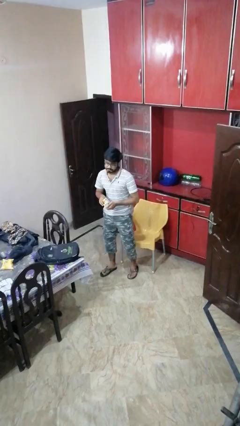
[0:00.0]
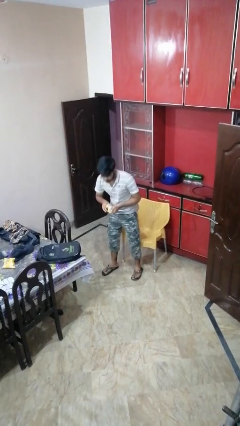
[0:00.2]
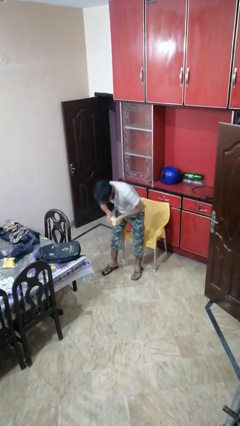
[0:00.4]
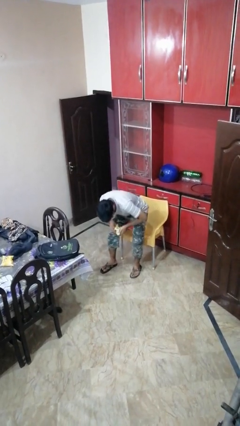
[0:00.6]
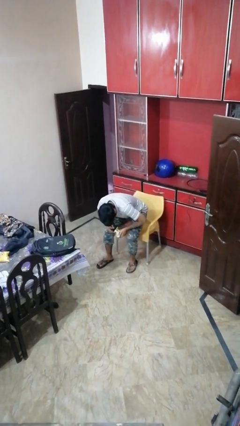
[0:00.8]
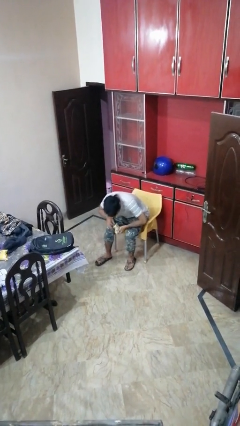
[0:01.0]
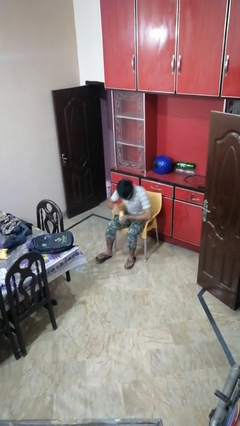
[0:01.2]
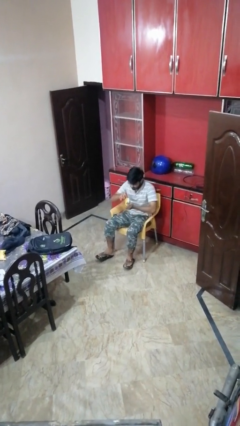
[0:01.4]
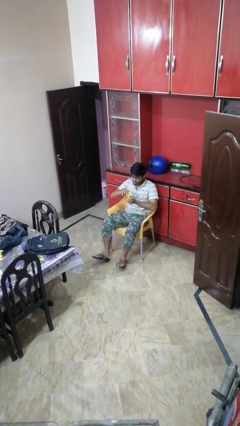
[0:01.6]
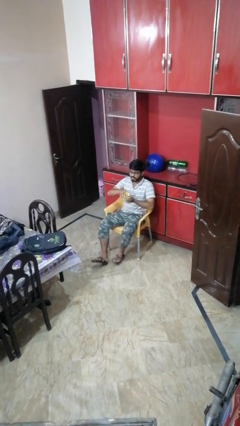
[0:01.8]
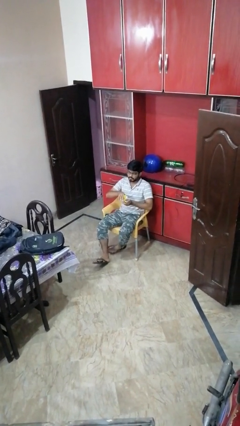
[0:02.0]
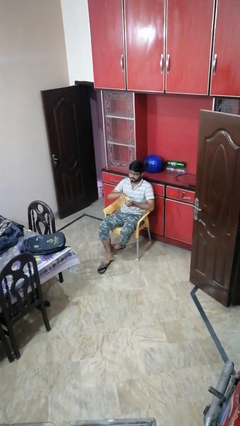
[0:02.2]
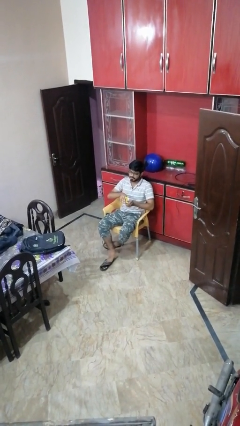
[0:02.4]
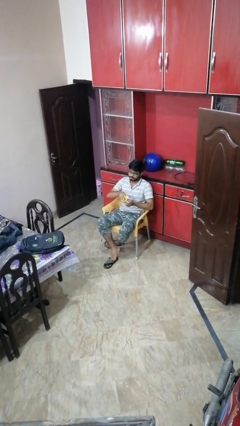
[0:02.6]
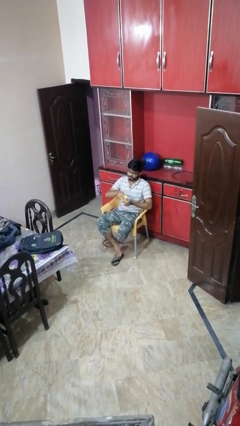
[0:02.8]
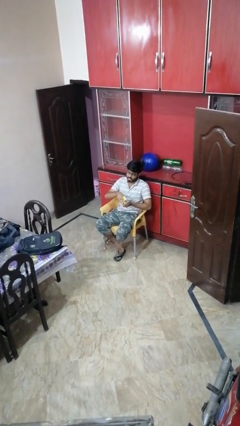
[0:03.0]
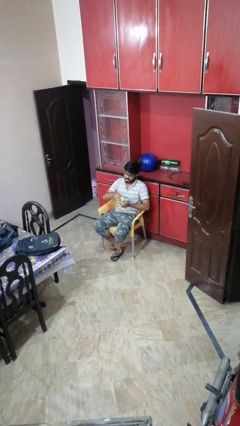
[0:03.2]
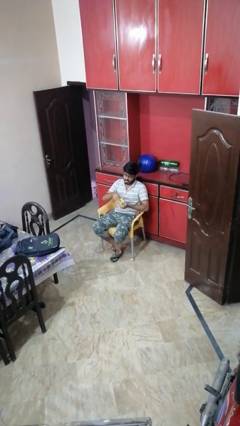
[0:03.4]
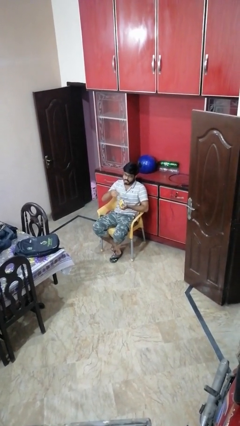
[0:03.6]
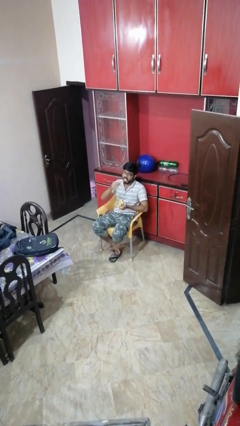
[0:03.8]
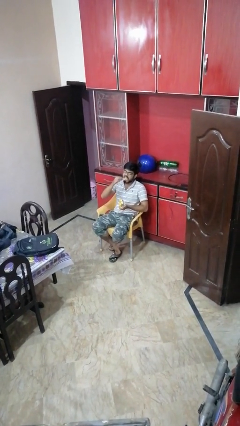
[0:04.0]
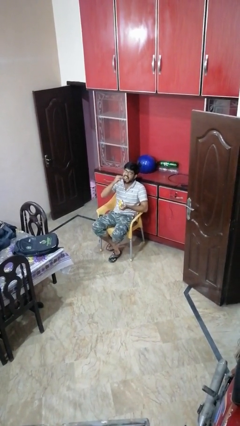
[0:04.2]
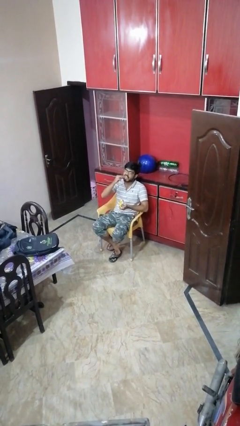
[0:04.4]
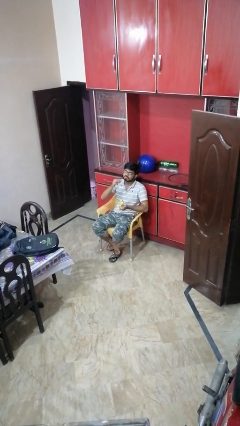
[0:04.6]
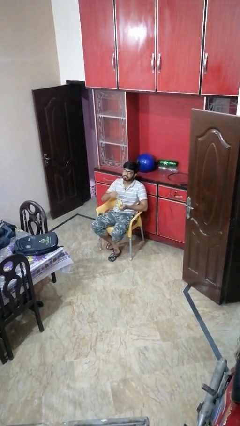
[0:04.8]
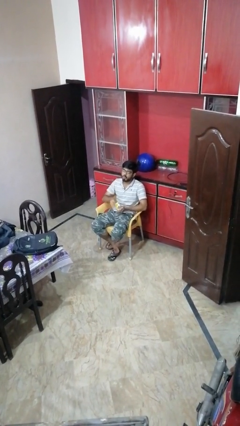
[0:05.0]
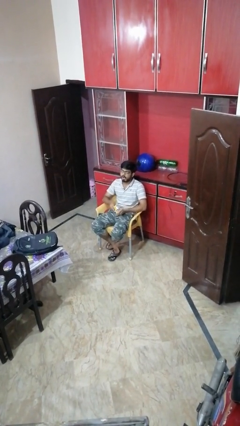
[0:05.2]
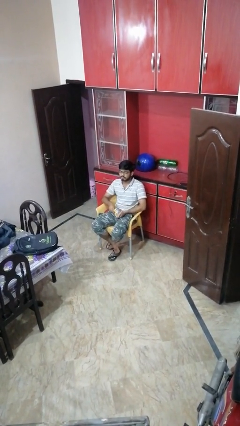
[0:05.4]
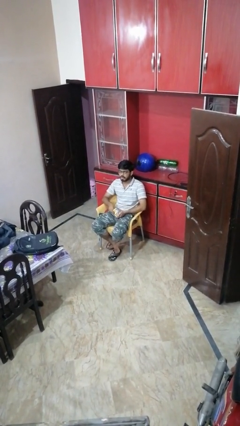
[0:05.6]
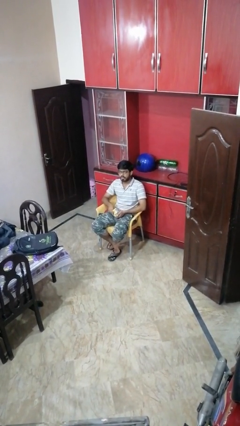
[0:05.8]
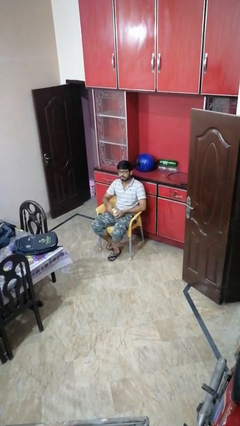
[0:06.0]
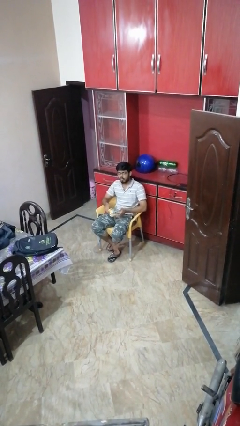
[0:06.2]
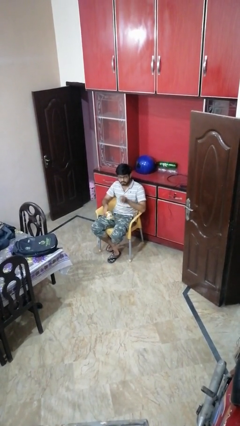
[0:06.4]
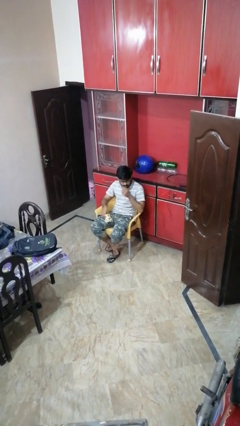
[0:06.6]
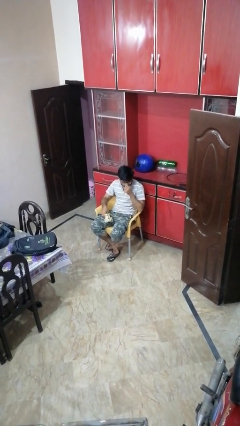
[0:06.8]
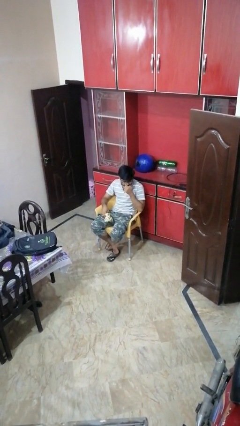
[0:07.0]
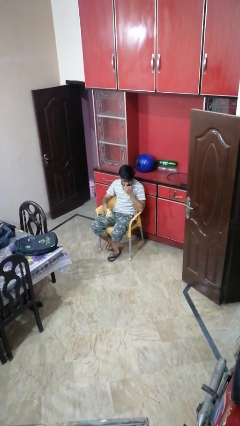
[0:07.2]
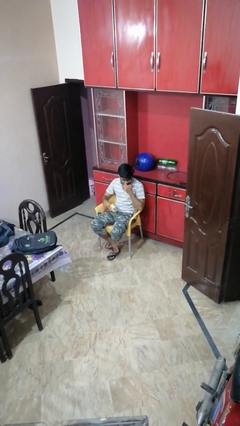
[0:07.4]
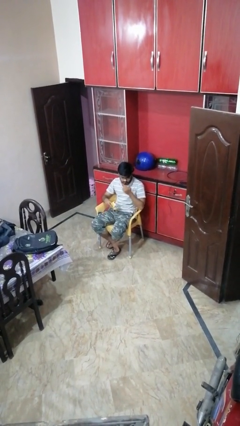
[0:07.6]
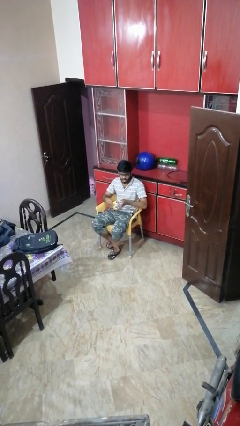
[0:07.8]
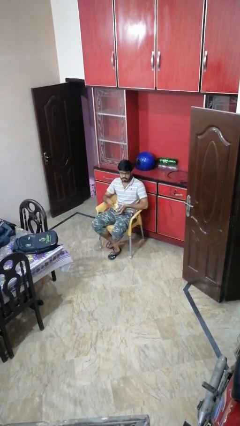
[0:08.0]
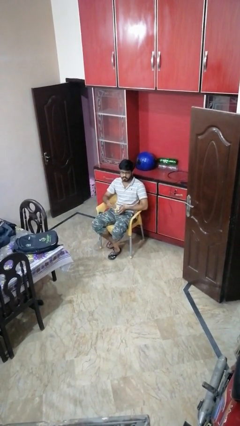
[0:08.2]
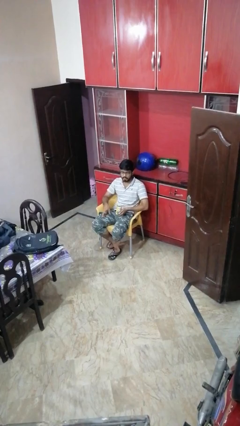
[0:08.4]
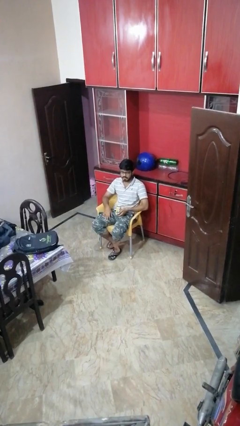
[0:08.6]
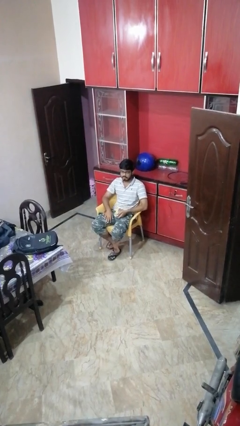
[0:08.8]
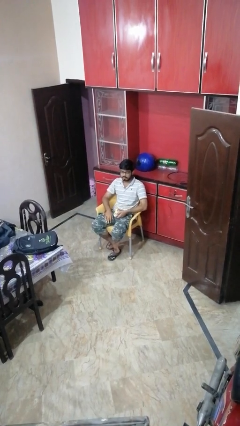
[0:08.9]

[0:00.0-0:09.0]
person eats snack from bag

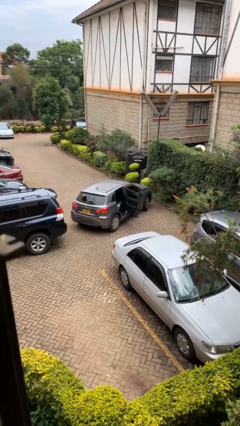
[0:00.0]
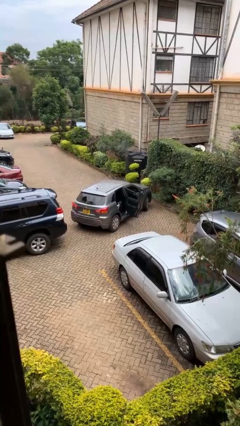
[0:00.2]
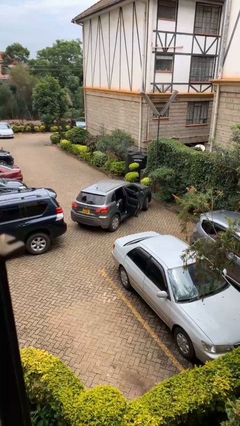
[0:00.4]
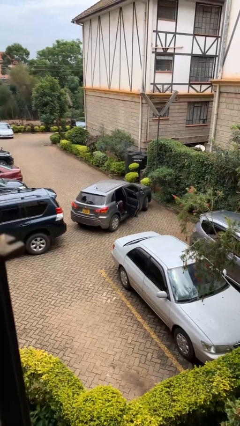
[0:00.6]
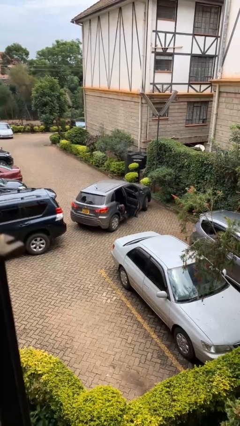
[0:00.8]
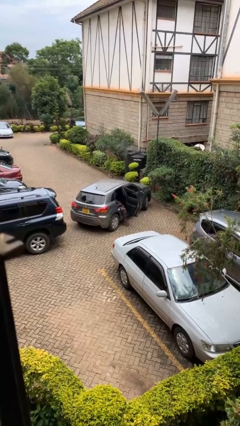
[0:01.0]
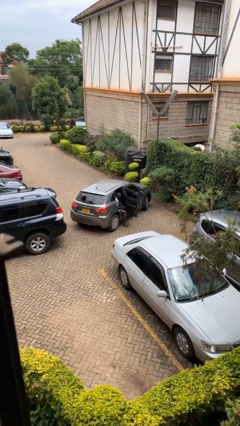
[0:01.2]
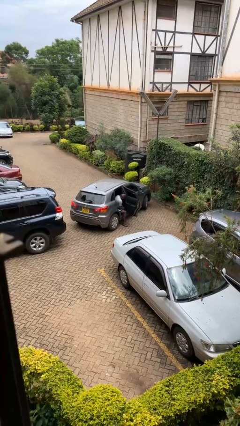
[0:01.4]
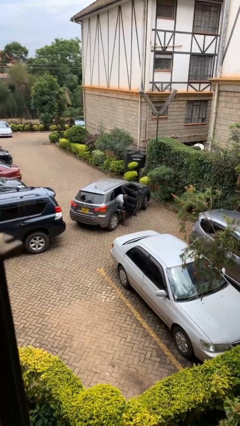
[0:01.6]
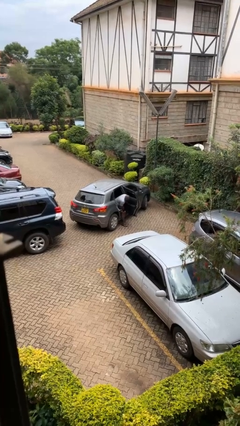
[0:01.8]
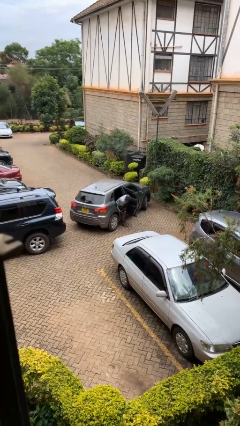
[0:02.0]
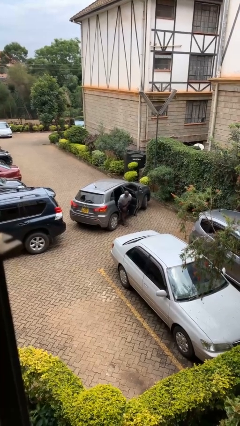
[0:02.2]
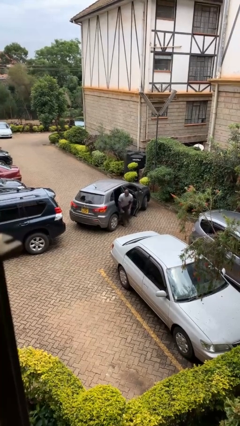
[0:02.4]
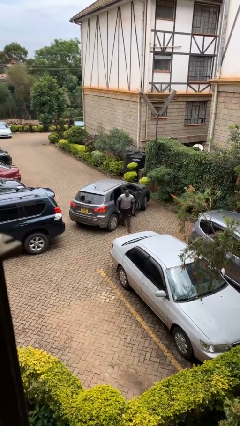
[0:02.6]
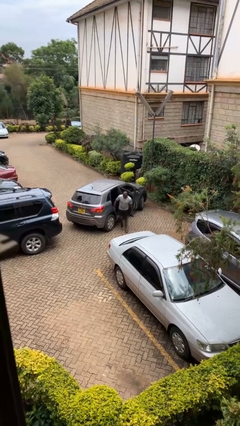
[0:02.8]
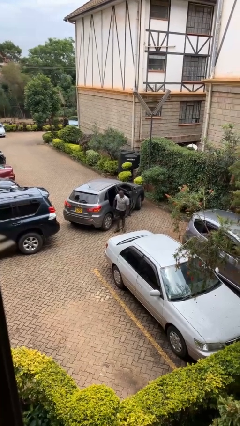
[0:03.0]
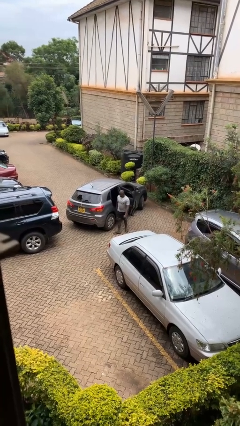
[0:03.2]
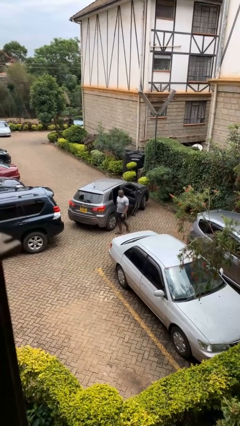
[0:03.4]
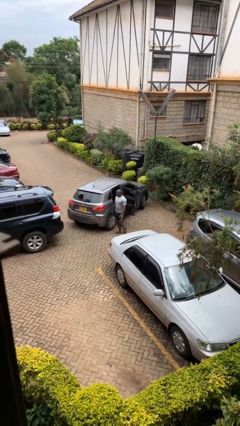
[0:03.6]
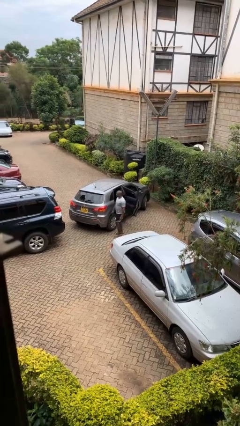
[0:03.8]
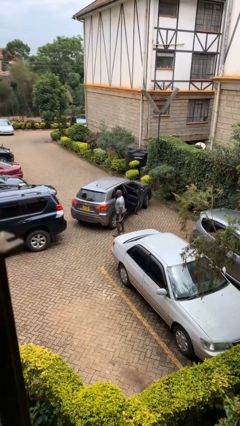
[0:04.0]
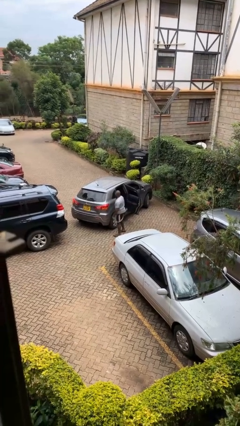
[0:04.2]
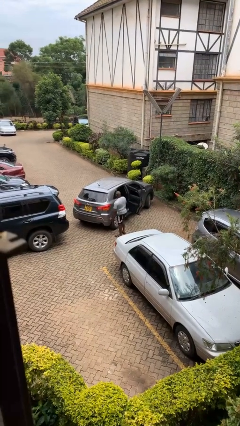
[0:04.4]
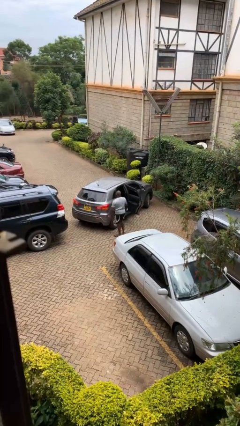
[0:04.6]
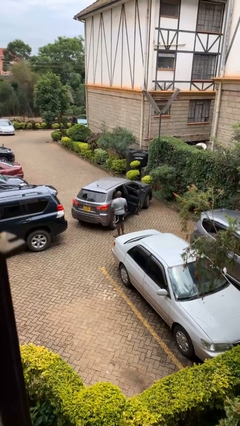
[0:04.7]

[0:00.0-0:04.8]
person exits car

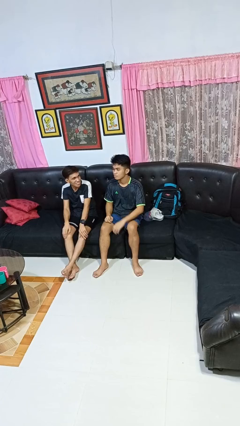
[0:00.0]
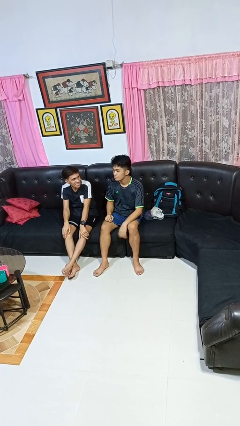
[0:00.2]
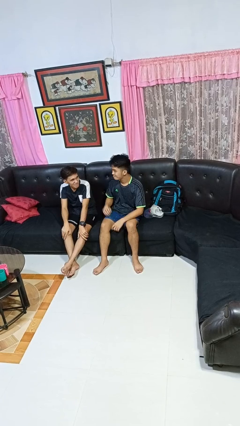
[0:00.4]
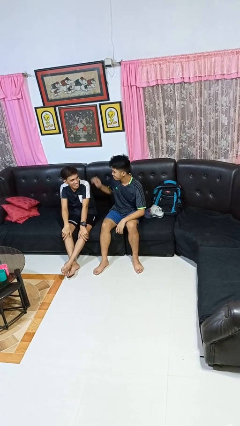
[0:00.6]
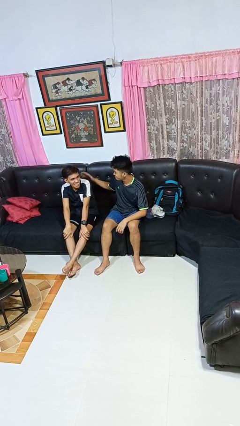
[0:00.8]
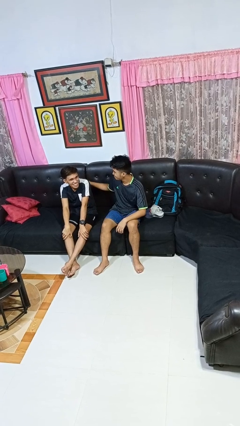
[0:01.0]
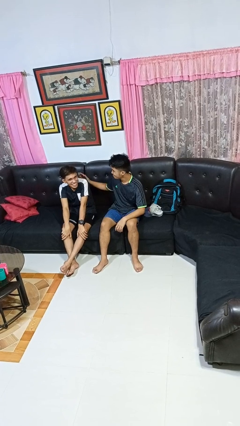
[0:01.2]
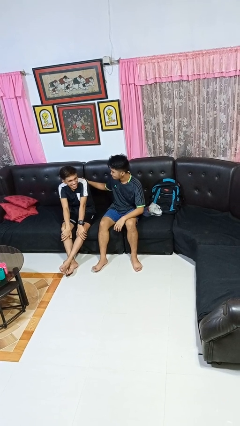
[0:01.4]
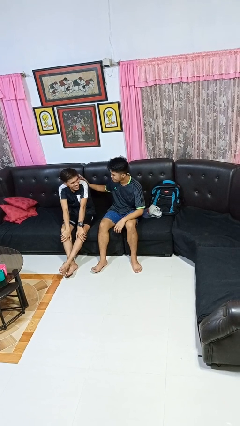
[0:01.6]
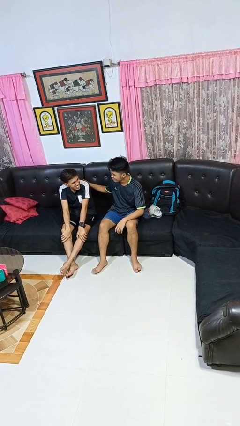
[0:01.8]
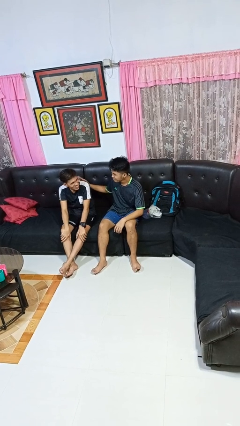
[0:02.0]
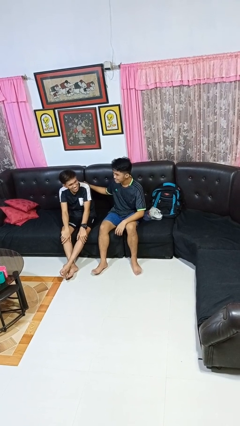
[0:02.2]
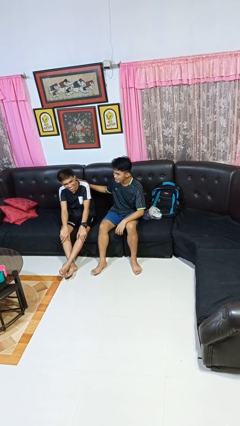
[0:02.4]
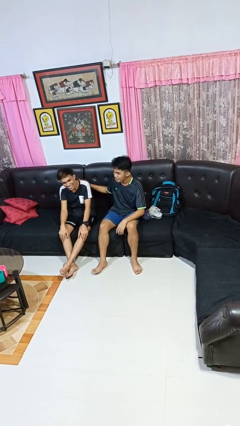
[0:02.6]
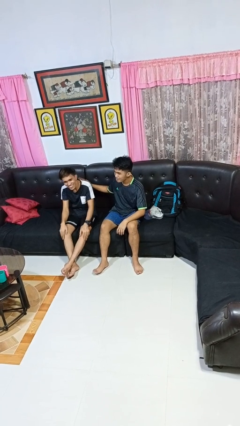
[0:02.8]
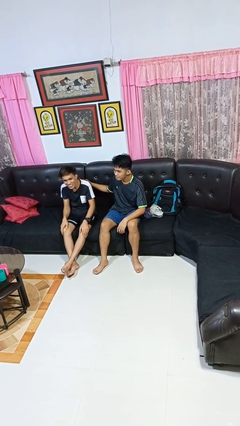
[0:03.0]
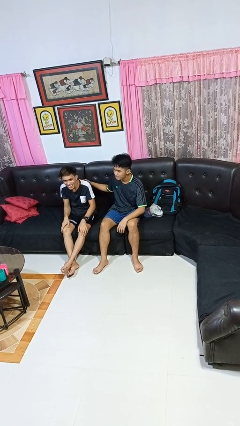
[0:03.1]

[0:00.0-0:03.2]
person touches back of person

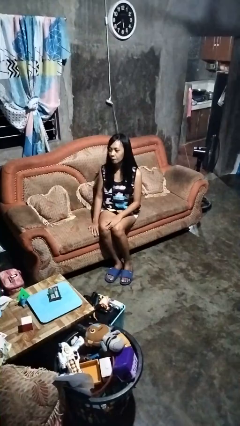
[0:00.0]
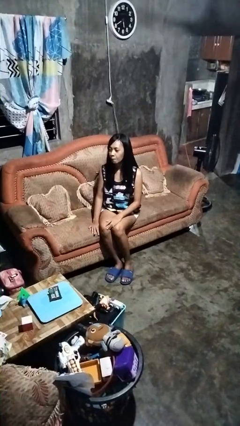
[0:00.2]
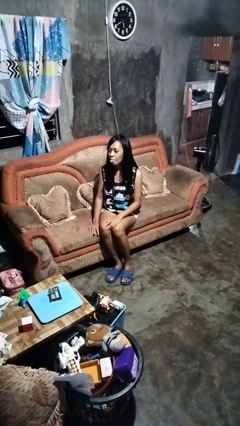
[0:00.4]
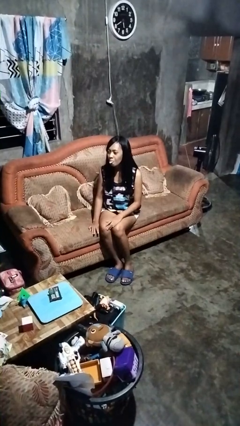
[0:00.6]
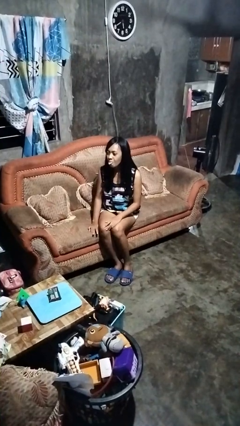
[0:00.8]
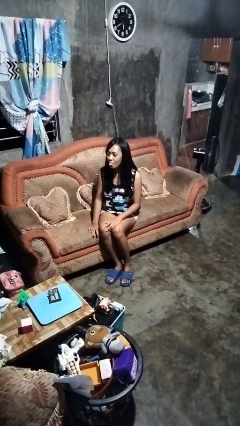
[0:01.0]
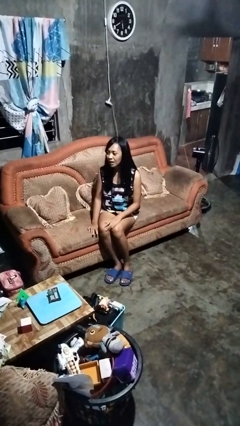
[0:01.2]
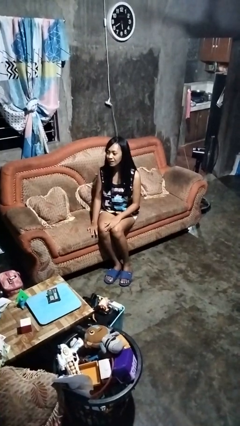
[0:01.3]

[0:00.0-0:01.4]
person sticks out tongue
